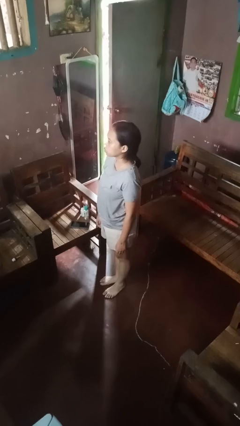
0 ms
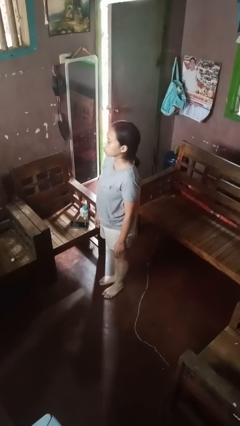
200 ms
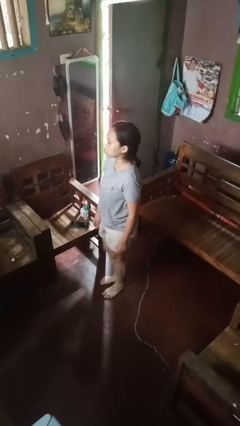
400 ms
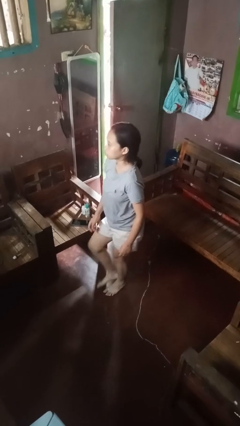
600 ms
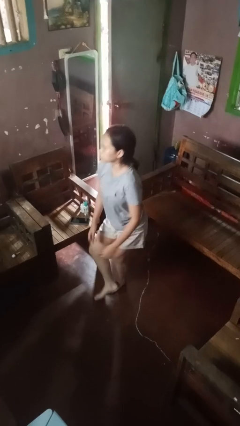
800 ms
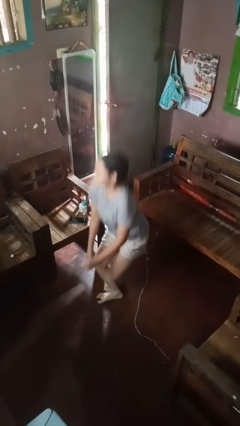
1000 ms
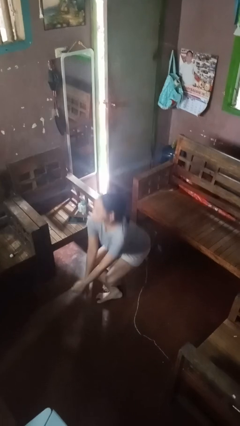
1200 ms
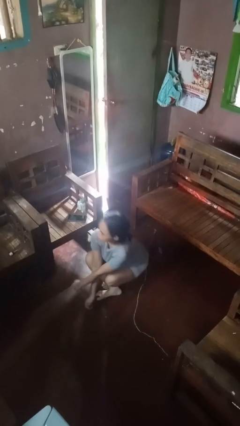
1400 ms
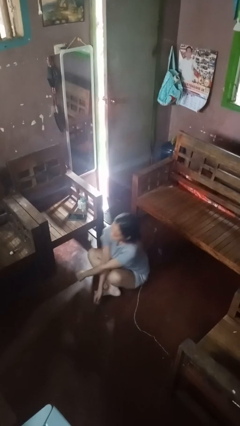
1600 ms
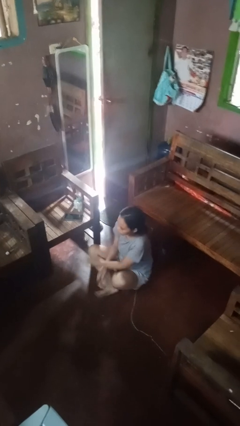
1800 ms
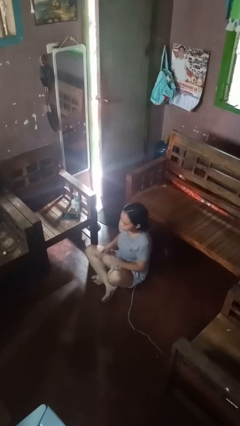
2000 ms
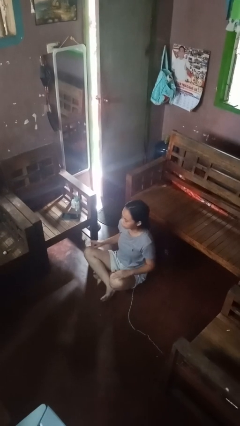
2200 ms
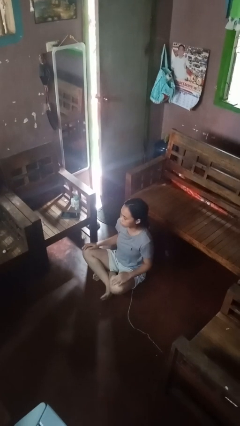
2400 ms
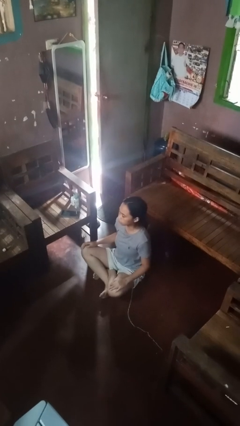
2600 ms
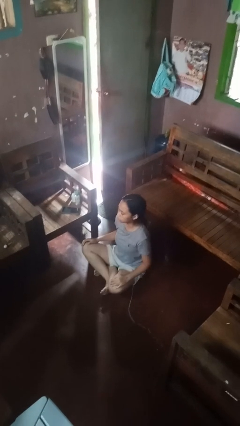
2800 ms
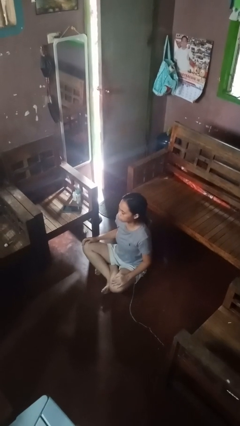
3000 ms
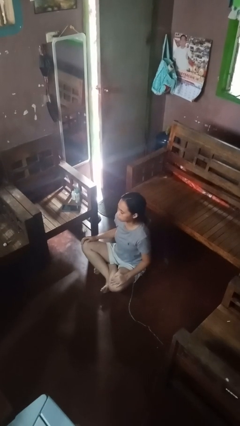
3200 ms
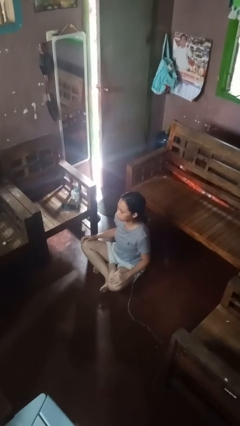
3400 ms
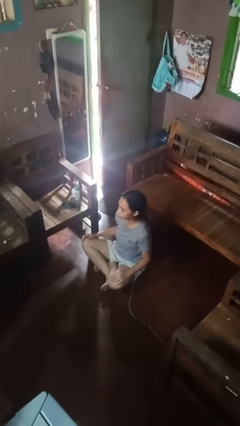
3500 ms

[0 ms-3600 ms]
person sits crisscross

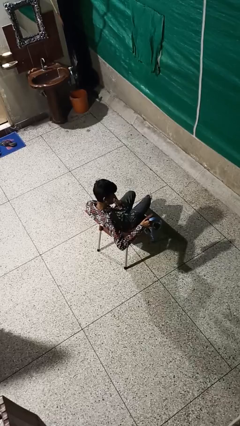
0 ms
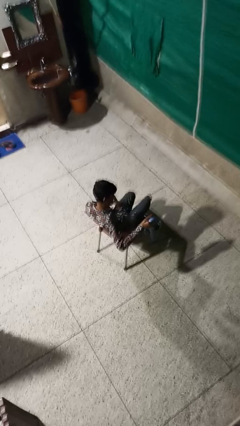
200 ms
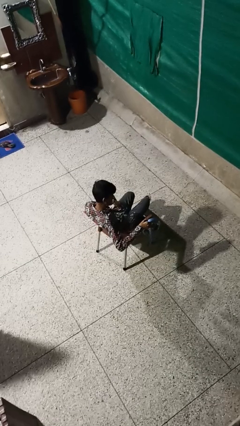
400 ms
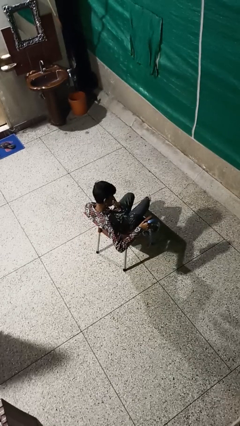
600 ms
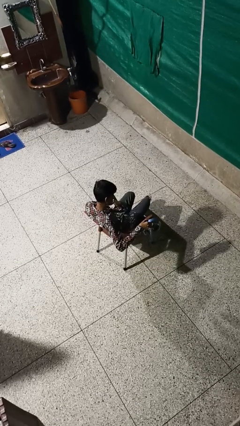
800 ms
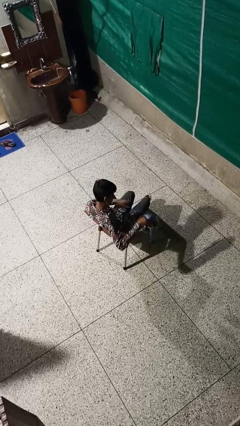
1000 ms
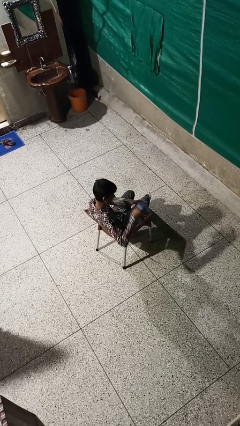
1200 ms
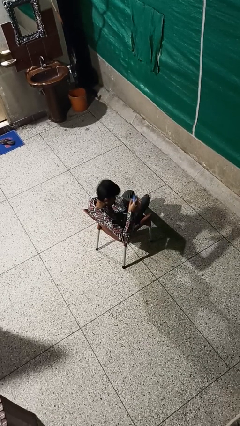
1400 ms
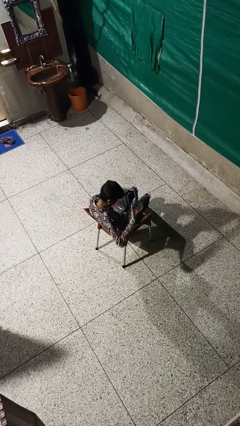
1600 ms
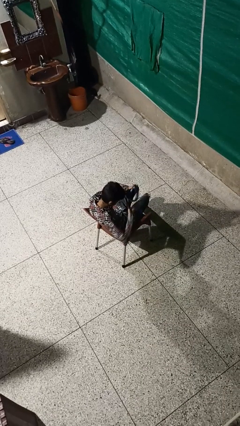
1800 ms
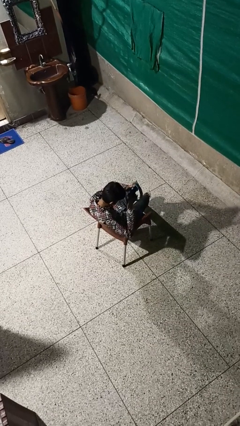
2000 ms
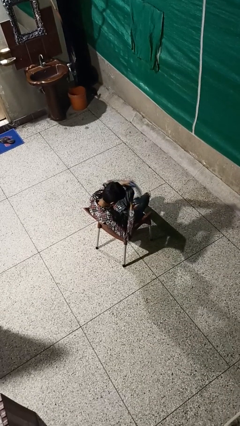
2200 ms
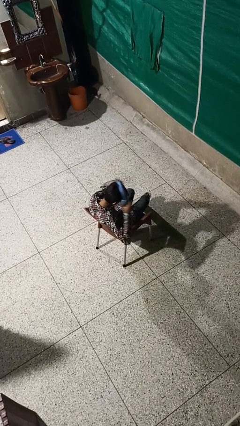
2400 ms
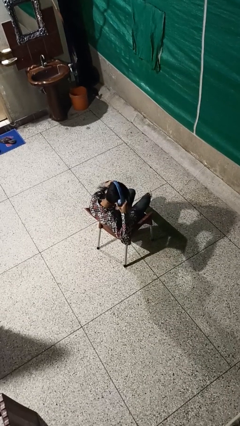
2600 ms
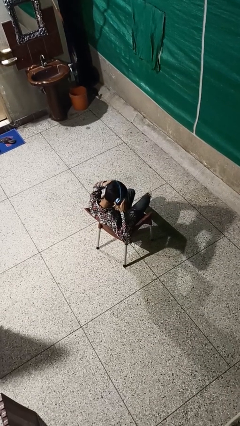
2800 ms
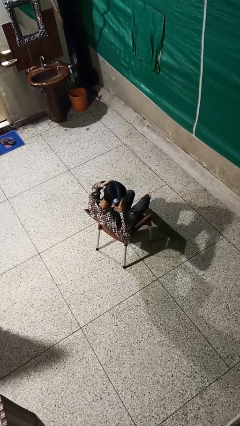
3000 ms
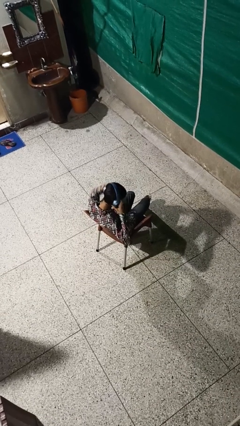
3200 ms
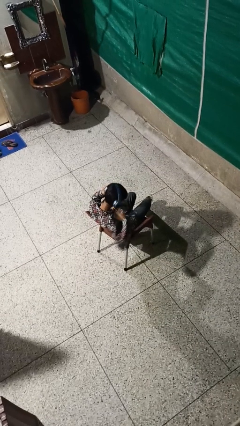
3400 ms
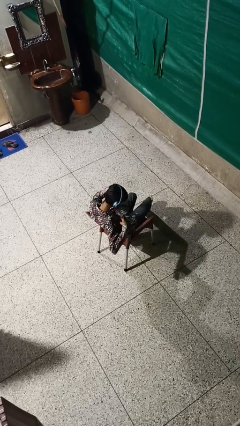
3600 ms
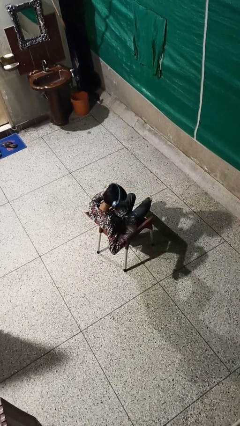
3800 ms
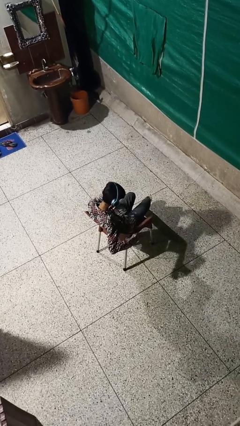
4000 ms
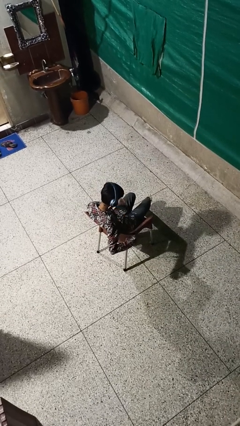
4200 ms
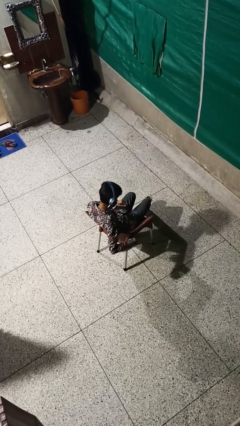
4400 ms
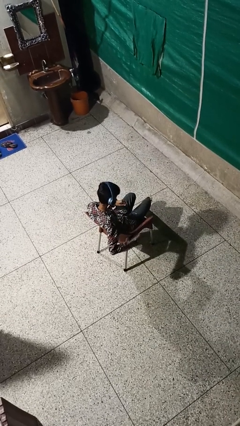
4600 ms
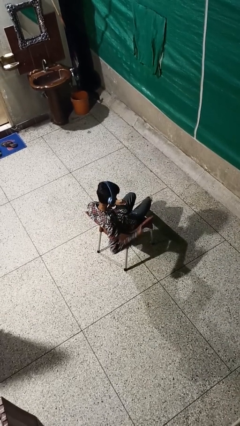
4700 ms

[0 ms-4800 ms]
person puts on headphones

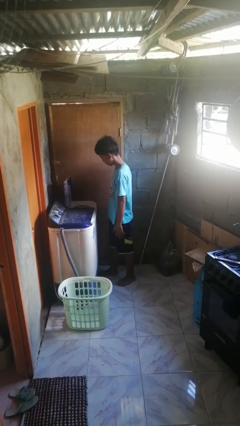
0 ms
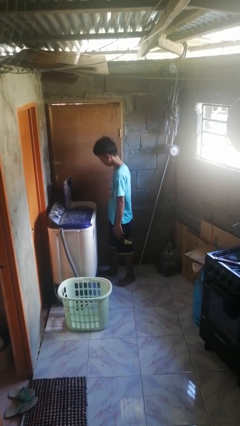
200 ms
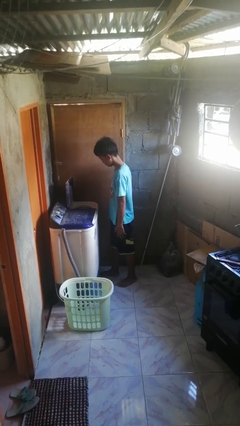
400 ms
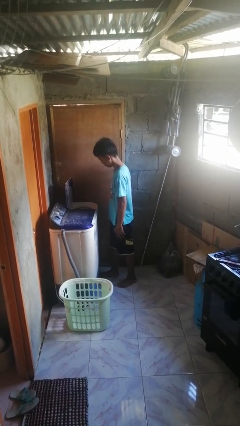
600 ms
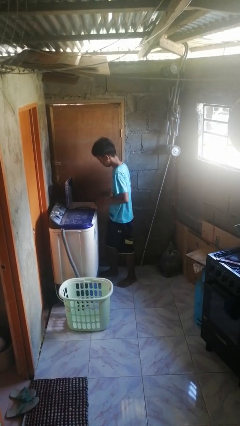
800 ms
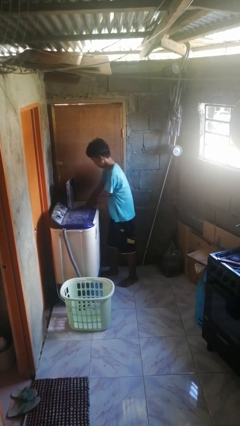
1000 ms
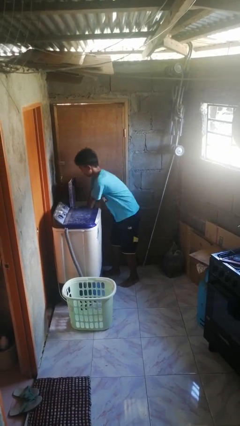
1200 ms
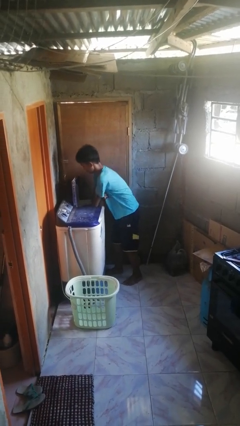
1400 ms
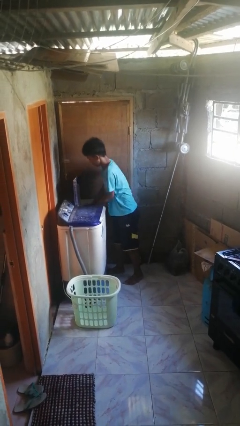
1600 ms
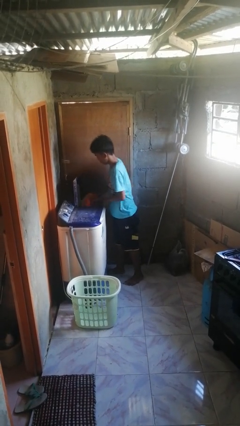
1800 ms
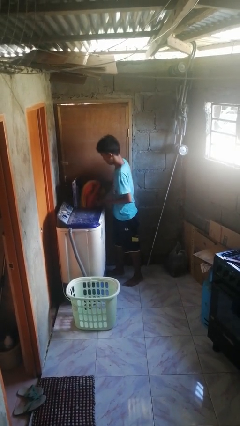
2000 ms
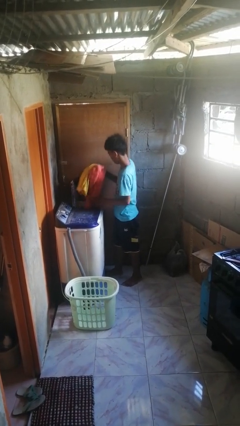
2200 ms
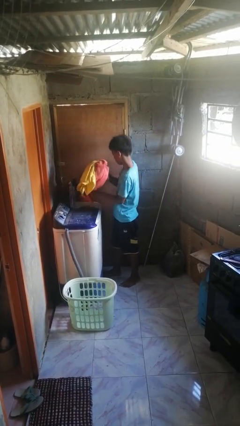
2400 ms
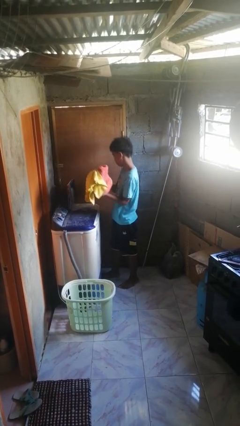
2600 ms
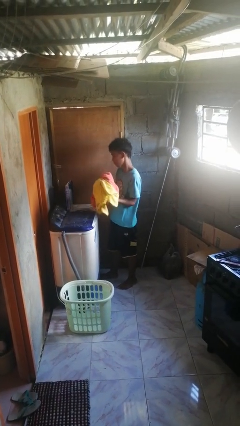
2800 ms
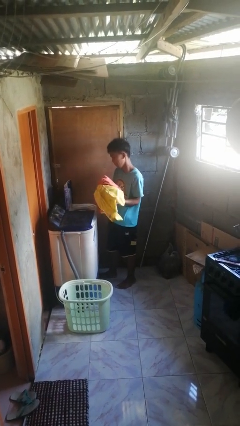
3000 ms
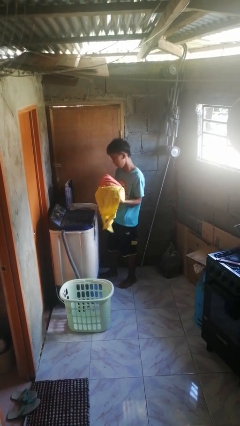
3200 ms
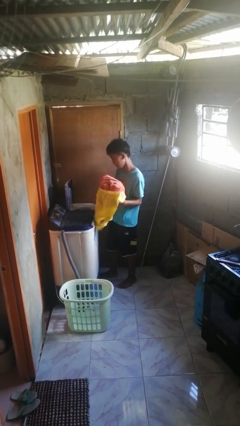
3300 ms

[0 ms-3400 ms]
person unloads dryer

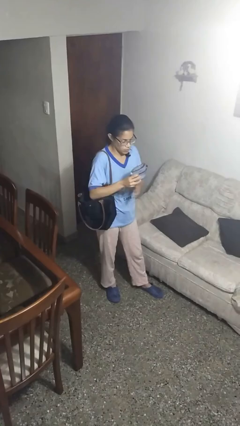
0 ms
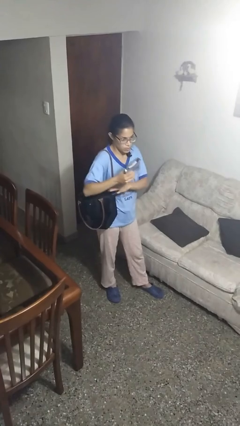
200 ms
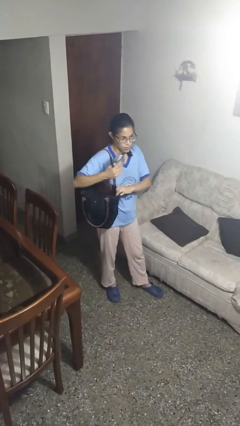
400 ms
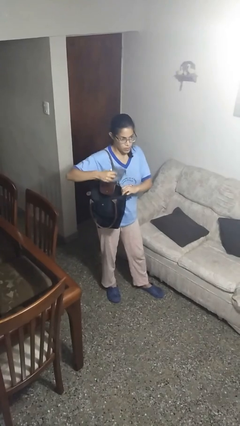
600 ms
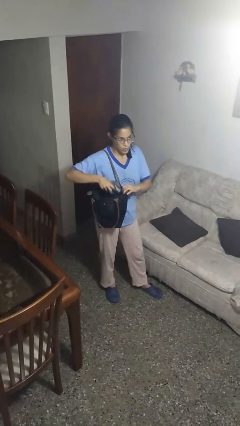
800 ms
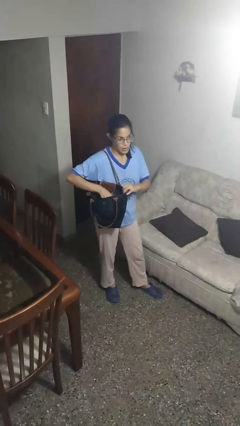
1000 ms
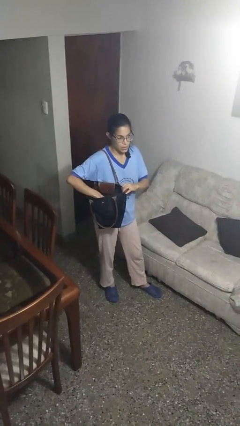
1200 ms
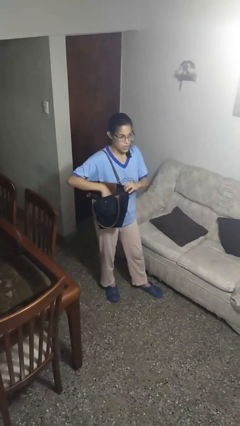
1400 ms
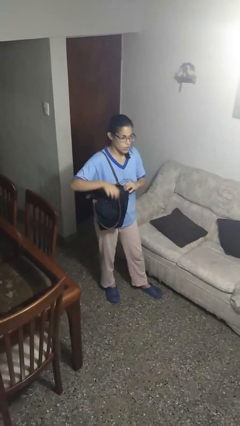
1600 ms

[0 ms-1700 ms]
person puts object into purse

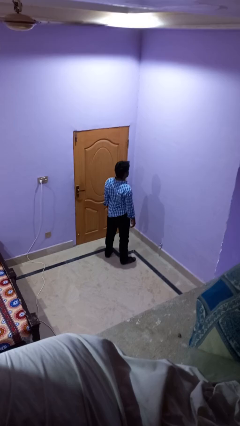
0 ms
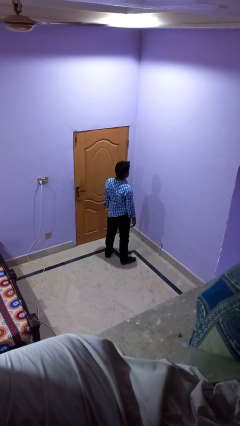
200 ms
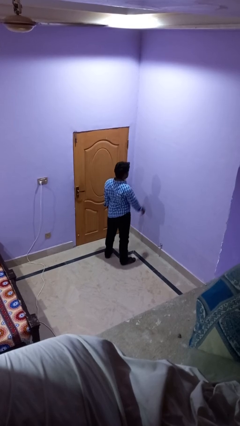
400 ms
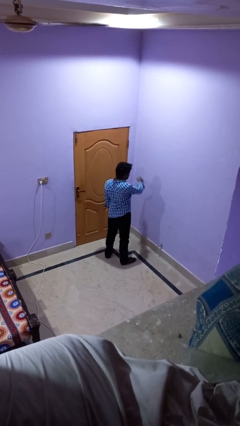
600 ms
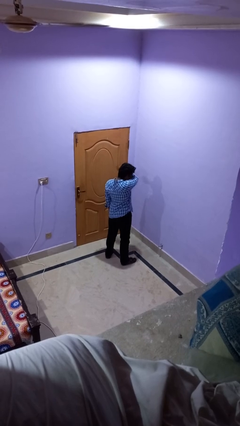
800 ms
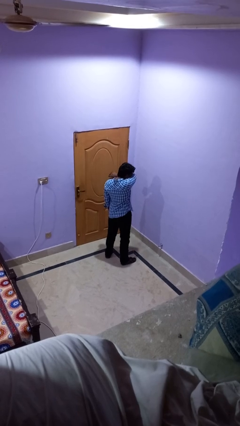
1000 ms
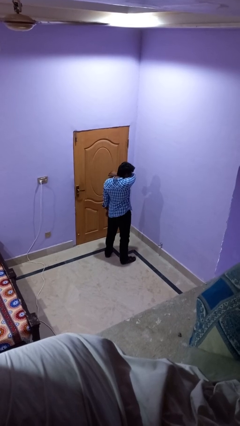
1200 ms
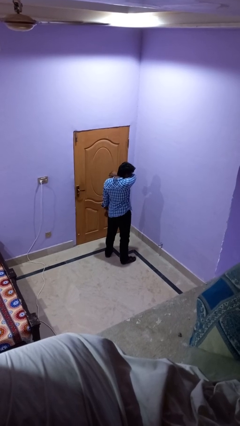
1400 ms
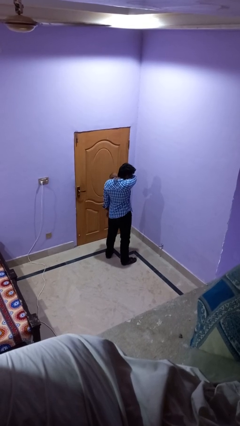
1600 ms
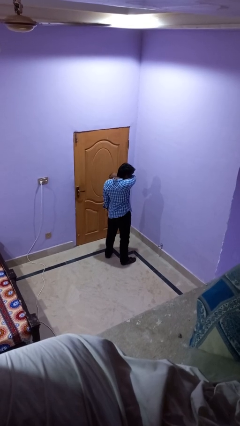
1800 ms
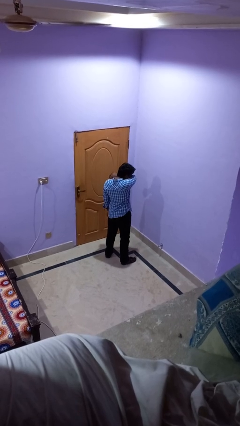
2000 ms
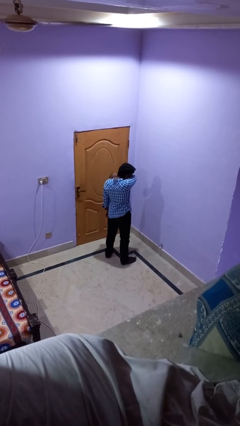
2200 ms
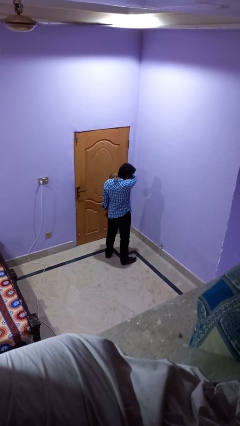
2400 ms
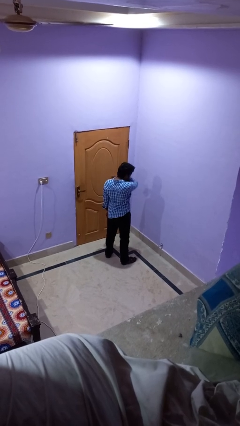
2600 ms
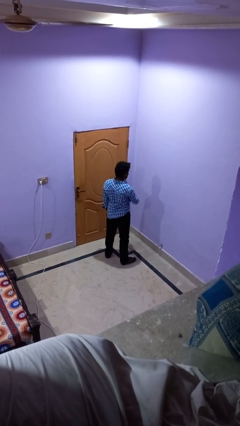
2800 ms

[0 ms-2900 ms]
person sneezes into arm

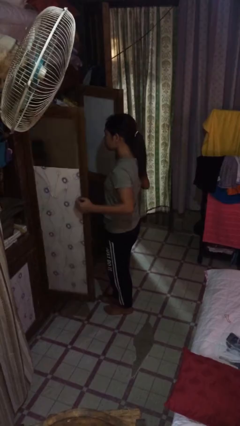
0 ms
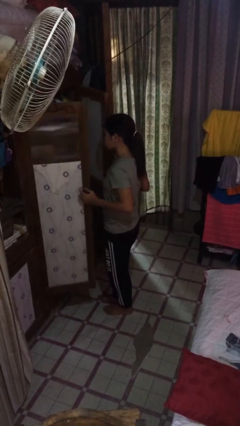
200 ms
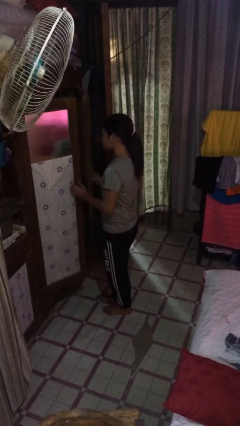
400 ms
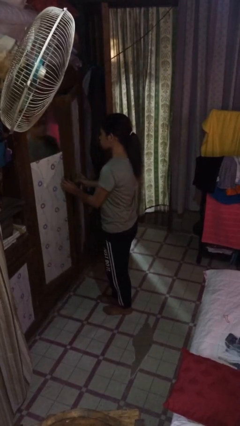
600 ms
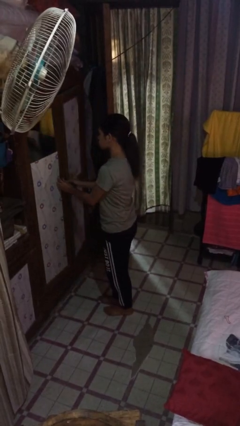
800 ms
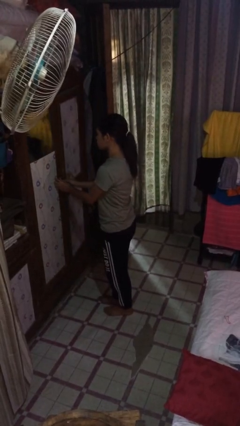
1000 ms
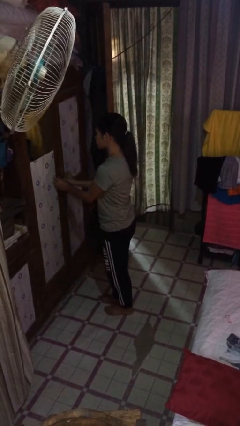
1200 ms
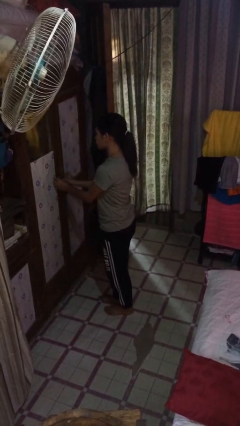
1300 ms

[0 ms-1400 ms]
person closes closet door
